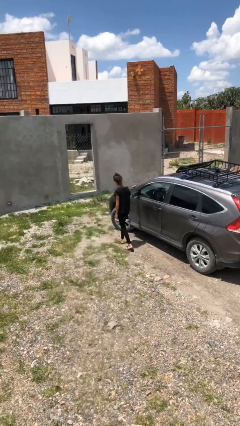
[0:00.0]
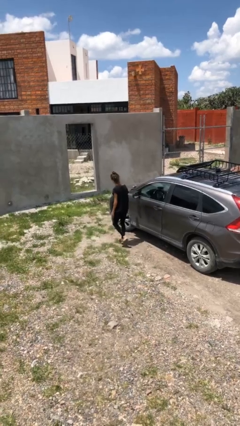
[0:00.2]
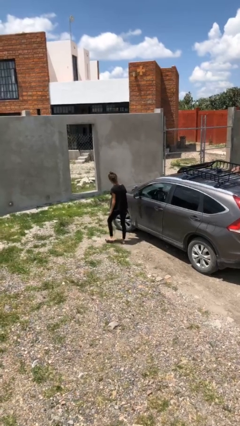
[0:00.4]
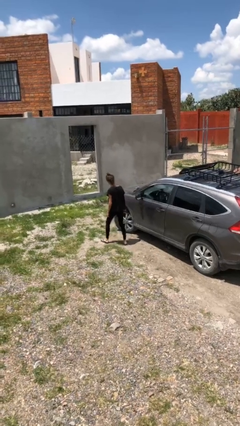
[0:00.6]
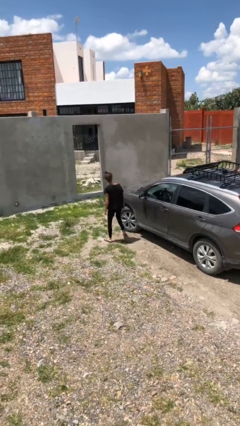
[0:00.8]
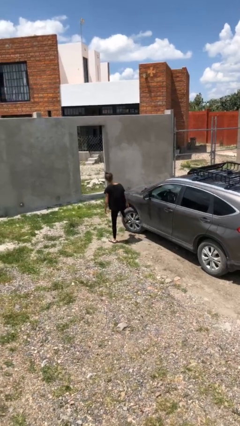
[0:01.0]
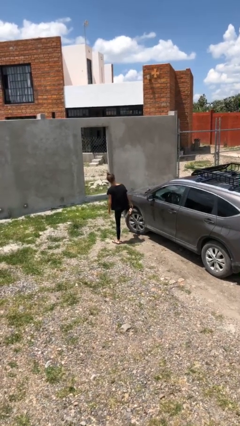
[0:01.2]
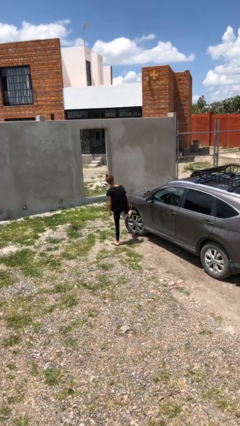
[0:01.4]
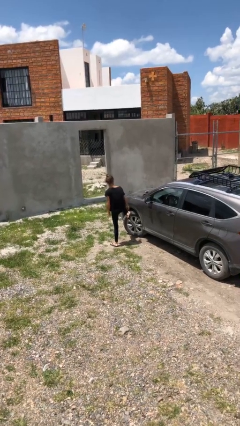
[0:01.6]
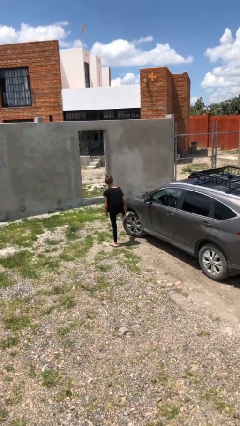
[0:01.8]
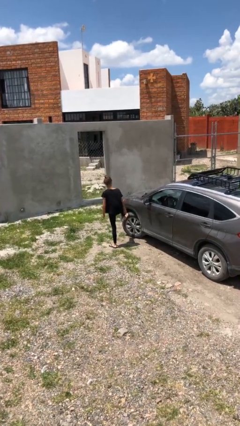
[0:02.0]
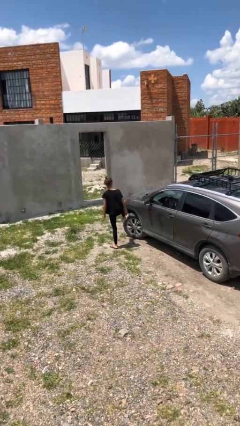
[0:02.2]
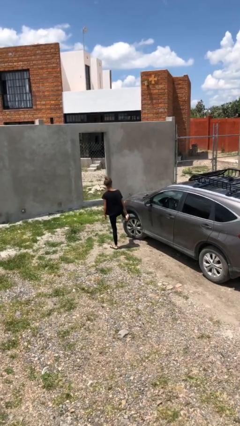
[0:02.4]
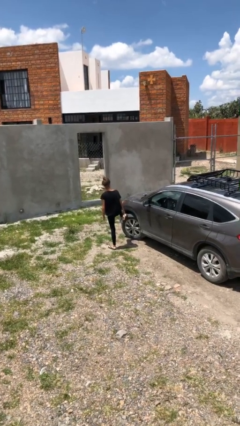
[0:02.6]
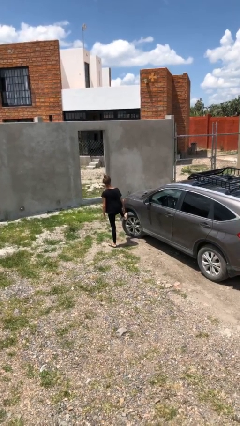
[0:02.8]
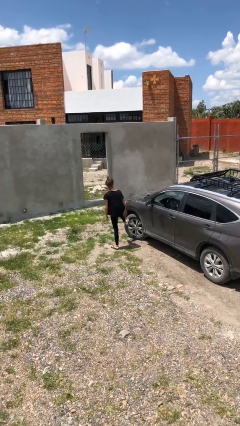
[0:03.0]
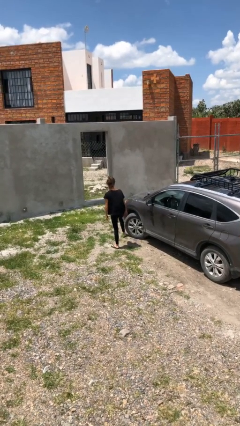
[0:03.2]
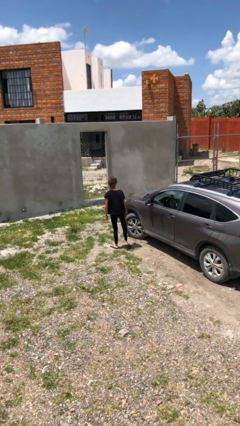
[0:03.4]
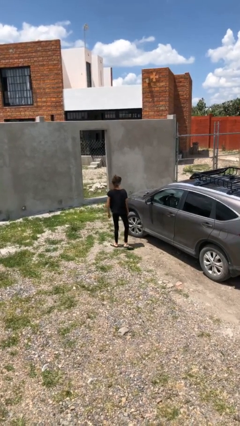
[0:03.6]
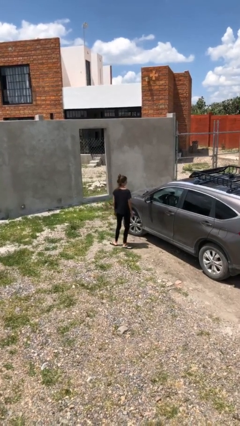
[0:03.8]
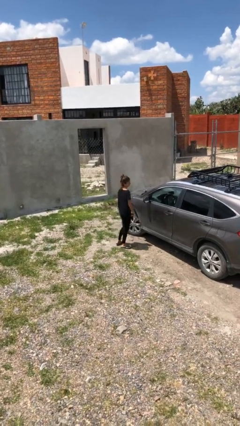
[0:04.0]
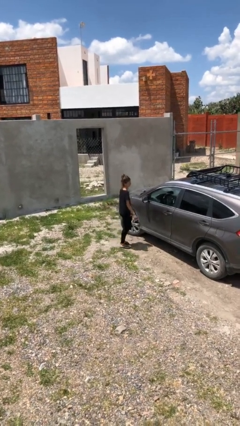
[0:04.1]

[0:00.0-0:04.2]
person kicks car tires

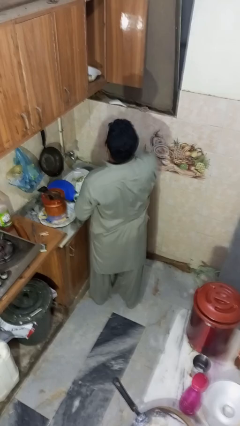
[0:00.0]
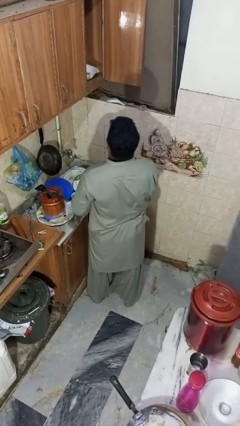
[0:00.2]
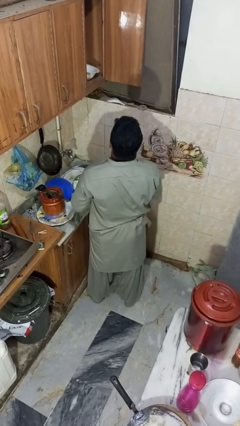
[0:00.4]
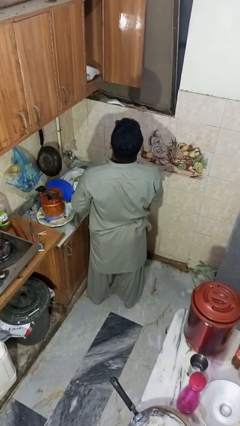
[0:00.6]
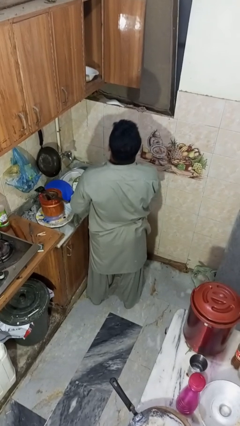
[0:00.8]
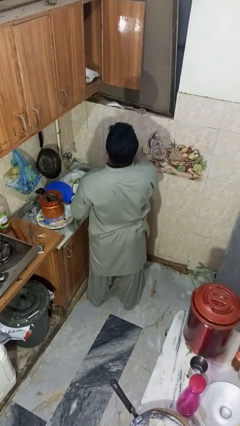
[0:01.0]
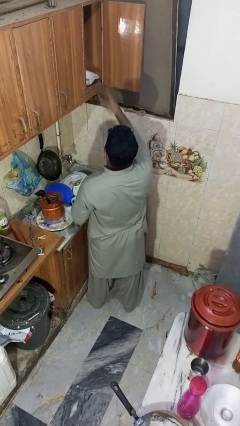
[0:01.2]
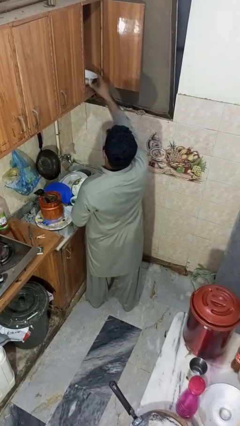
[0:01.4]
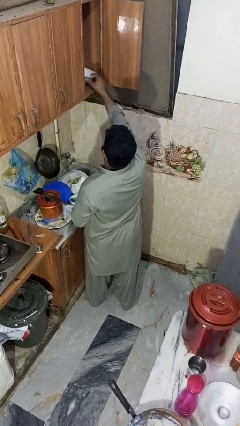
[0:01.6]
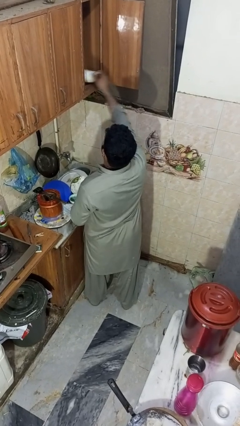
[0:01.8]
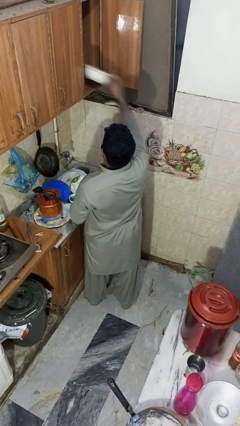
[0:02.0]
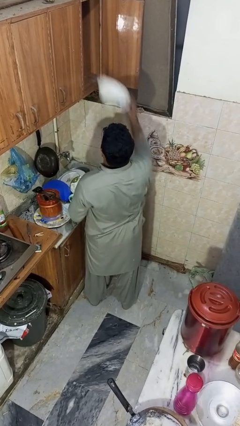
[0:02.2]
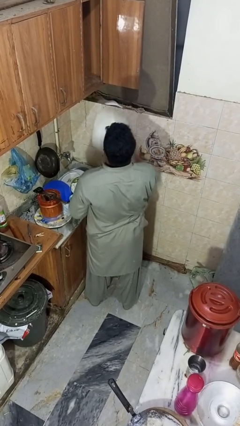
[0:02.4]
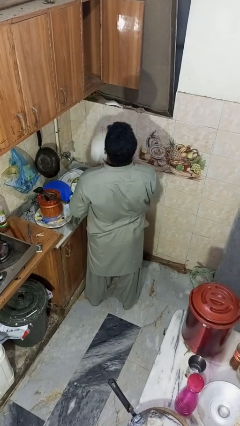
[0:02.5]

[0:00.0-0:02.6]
person takes object from cabinet

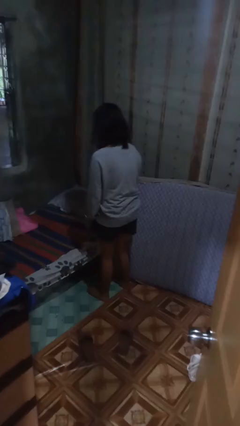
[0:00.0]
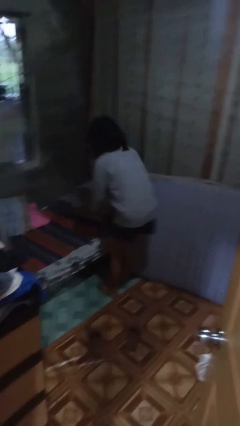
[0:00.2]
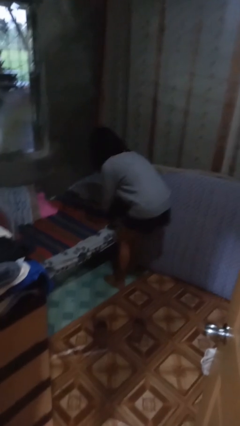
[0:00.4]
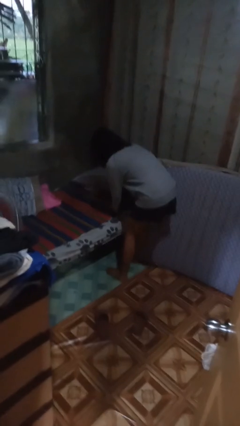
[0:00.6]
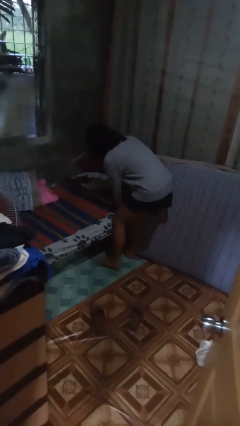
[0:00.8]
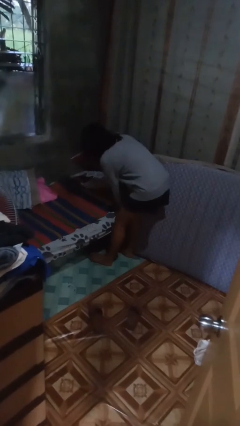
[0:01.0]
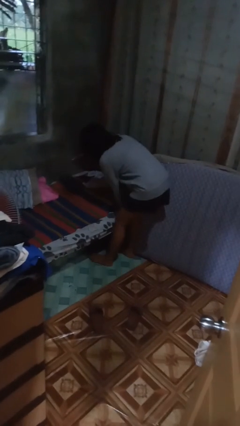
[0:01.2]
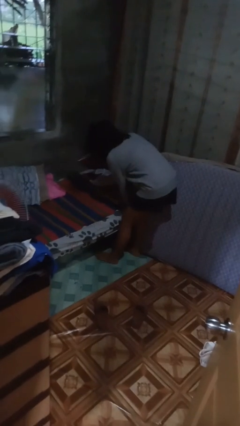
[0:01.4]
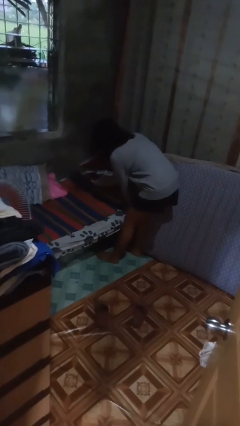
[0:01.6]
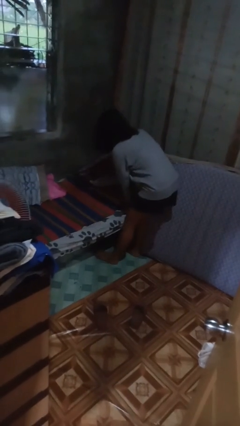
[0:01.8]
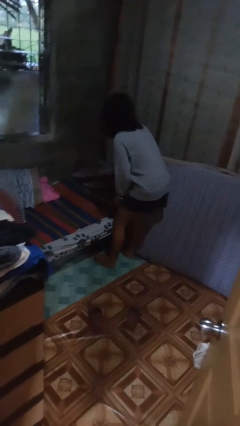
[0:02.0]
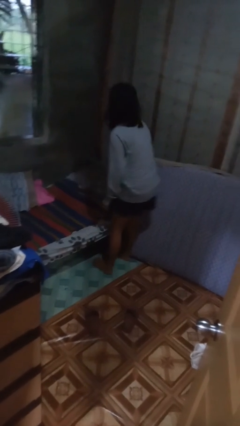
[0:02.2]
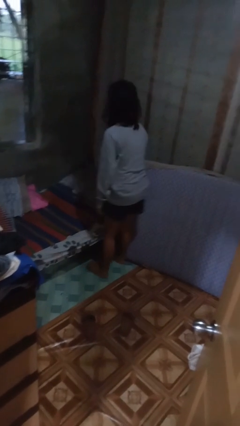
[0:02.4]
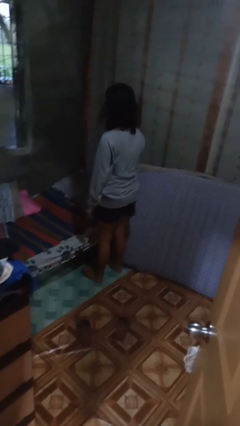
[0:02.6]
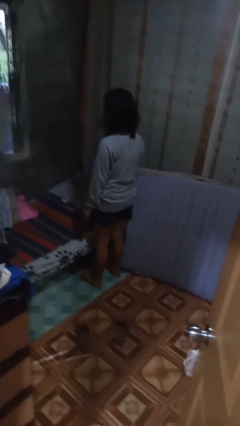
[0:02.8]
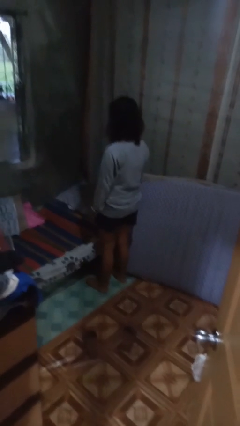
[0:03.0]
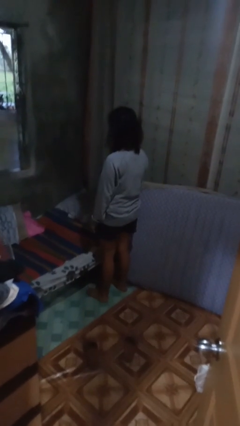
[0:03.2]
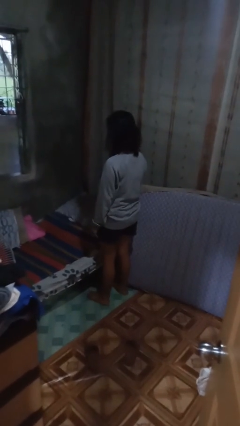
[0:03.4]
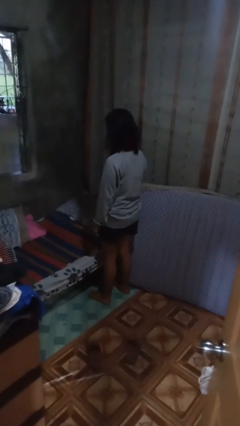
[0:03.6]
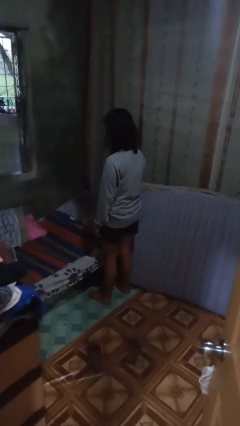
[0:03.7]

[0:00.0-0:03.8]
person searches under bed

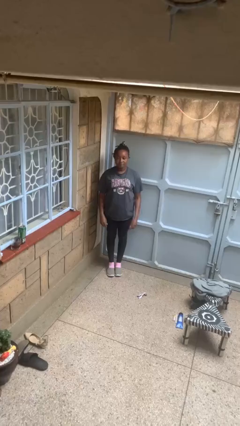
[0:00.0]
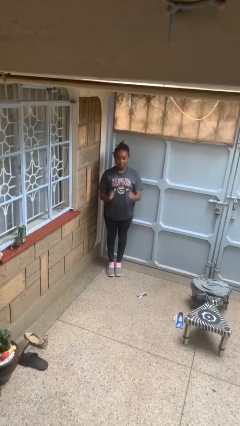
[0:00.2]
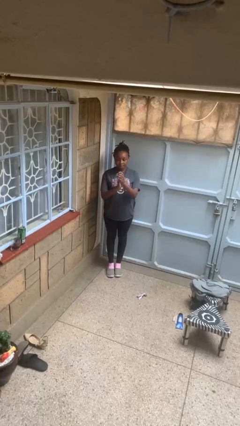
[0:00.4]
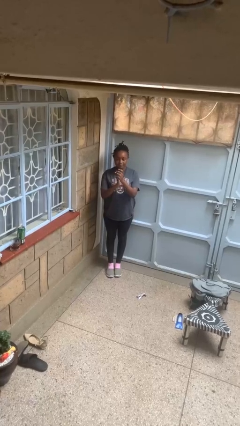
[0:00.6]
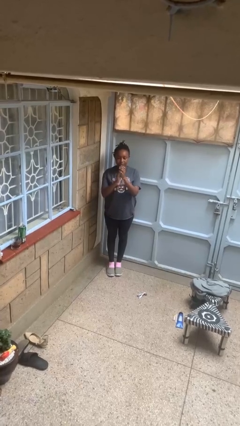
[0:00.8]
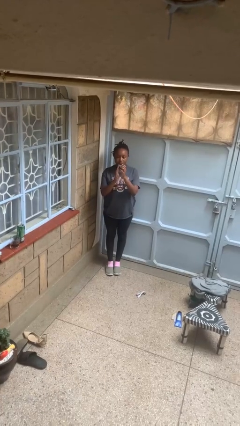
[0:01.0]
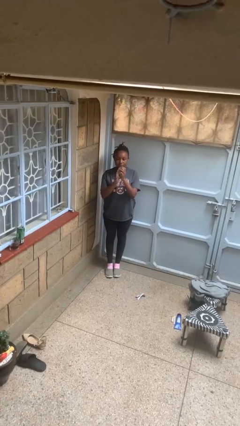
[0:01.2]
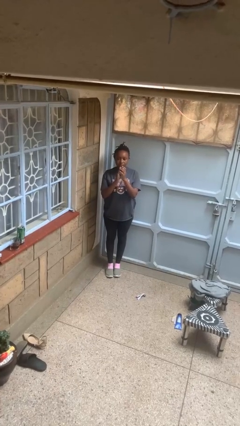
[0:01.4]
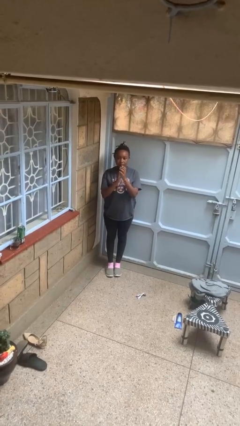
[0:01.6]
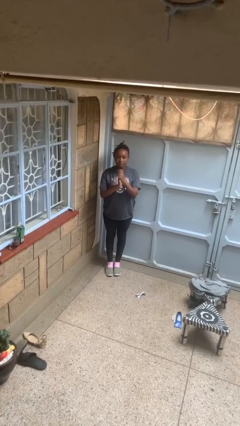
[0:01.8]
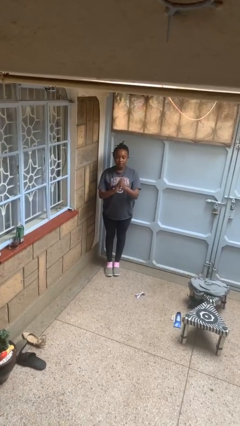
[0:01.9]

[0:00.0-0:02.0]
person claps hands

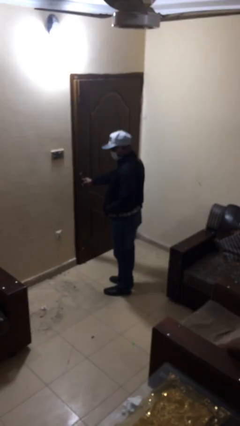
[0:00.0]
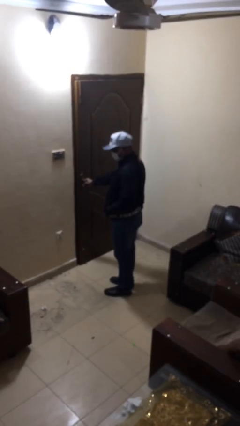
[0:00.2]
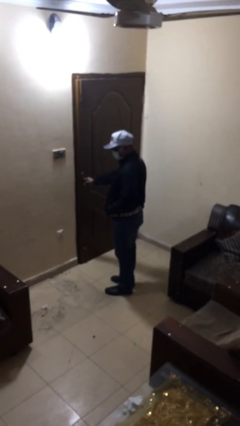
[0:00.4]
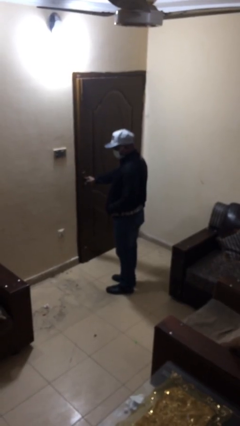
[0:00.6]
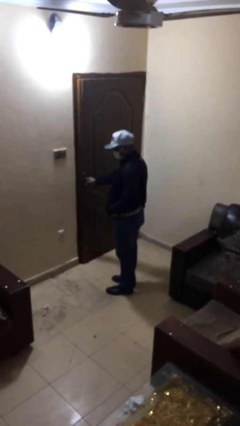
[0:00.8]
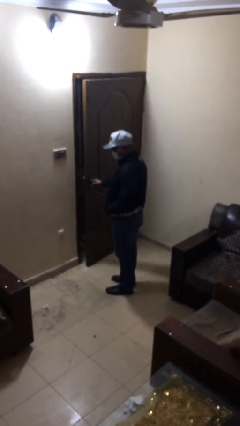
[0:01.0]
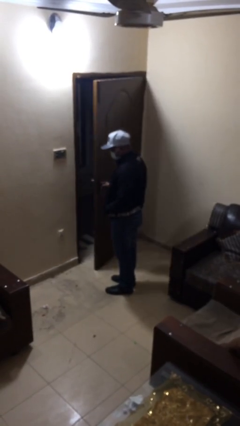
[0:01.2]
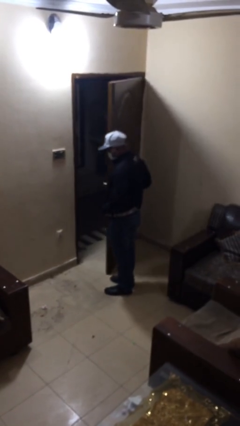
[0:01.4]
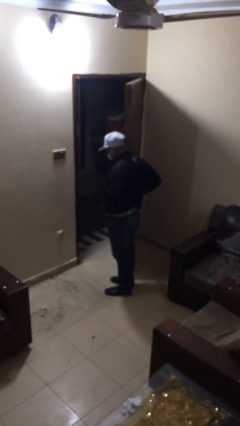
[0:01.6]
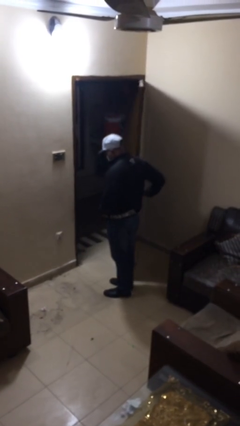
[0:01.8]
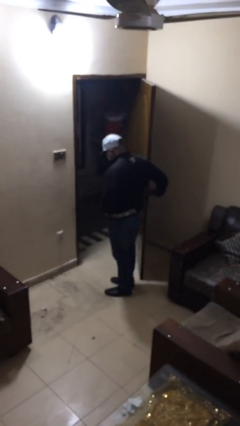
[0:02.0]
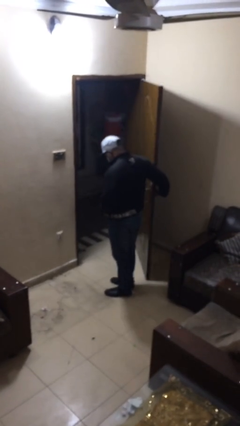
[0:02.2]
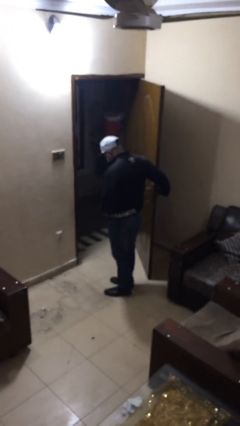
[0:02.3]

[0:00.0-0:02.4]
person opens facility door

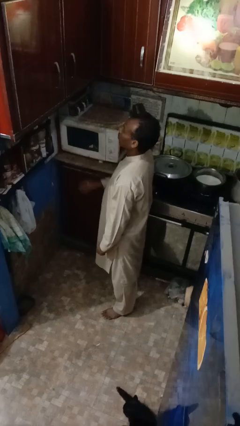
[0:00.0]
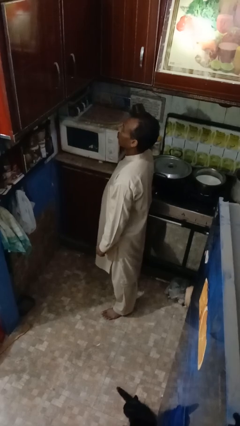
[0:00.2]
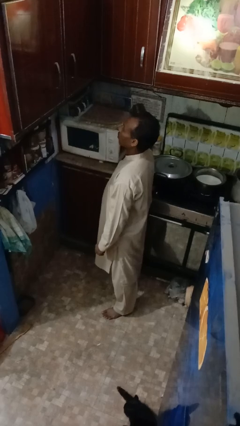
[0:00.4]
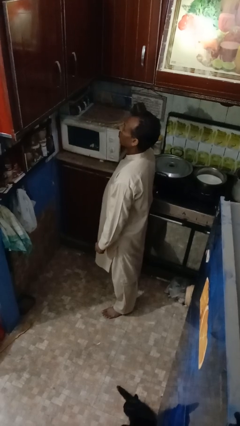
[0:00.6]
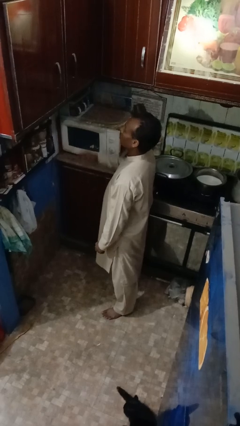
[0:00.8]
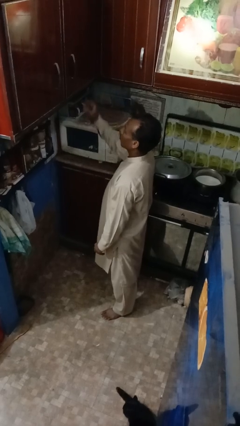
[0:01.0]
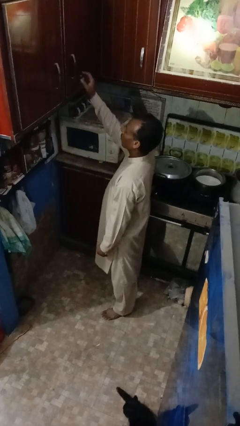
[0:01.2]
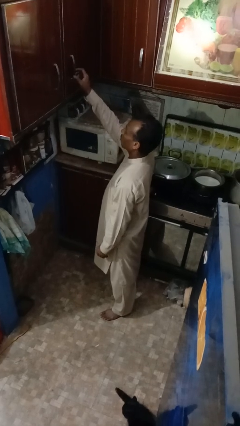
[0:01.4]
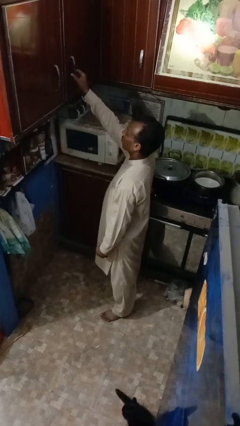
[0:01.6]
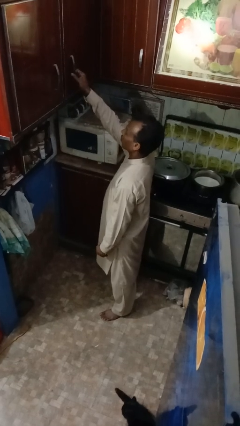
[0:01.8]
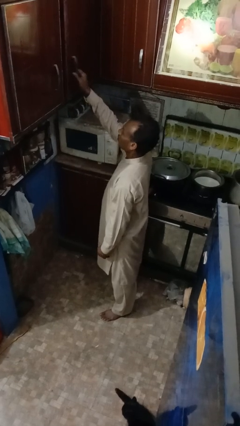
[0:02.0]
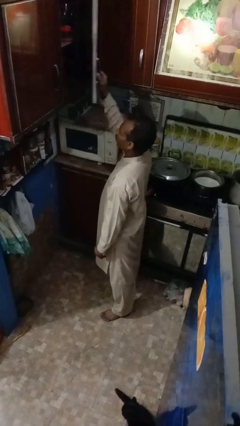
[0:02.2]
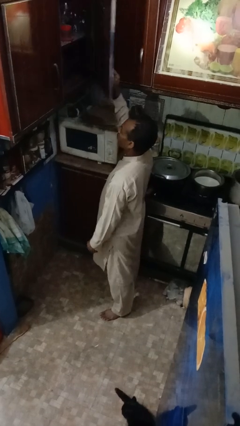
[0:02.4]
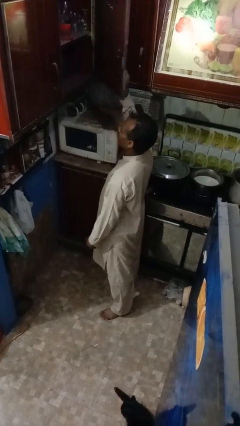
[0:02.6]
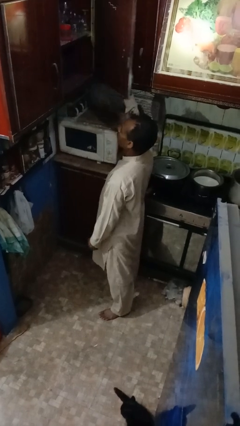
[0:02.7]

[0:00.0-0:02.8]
person opens cabinet
